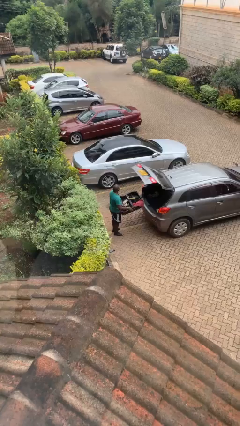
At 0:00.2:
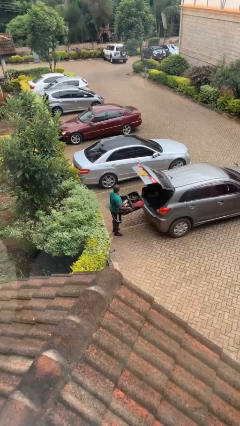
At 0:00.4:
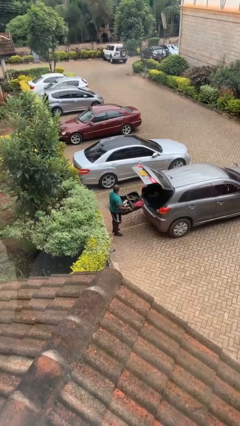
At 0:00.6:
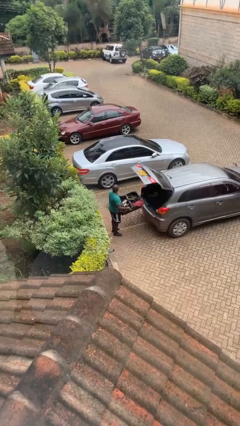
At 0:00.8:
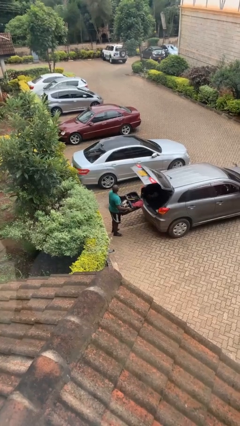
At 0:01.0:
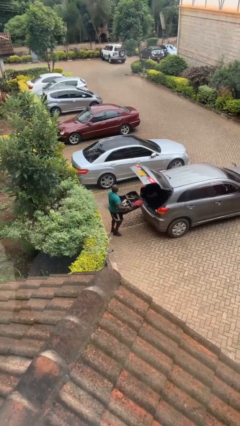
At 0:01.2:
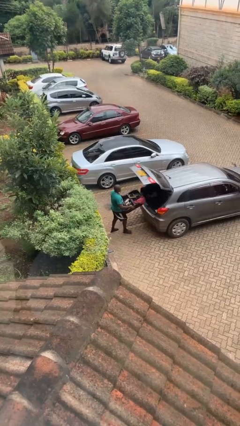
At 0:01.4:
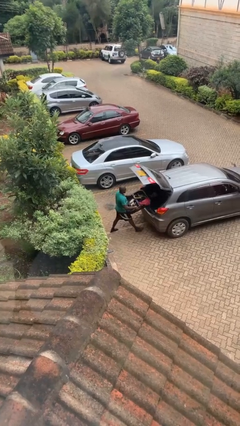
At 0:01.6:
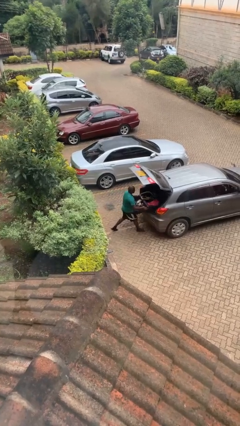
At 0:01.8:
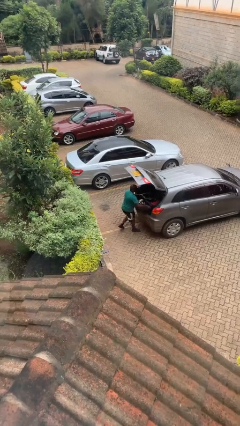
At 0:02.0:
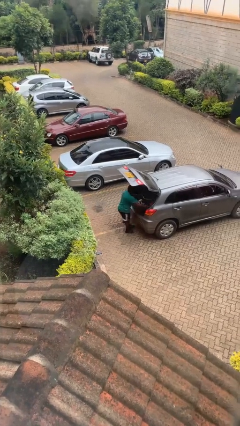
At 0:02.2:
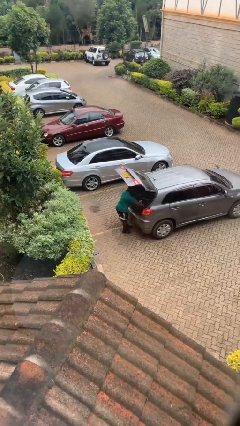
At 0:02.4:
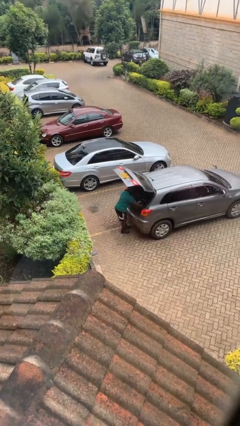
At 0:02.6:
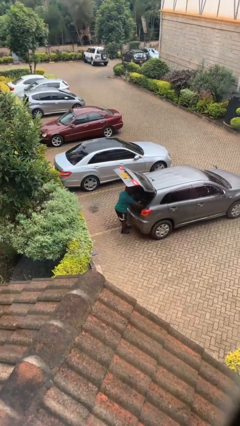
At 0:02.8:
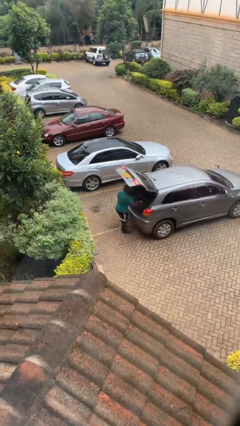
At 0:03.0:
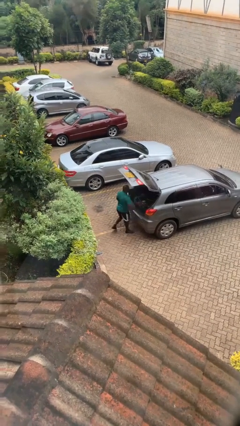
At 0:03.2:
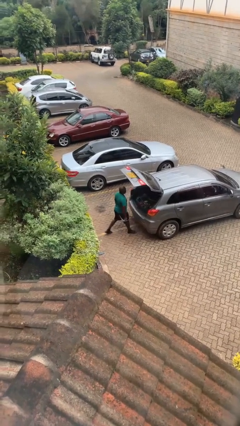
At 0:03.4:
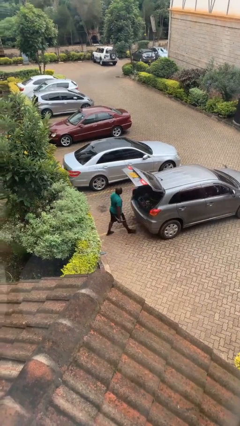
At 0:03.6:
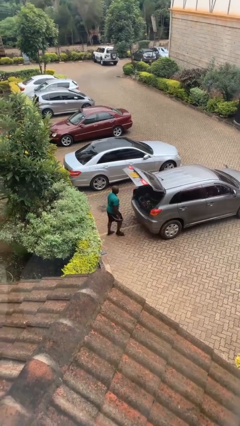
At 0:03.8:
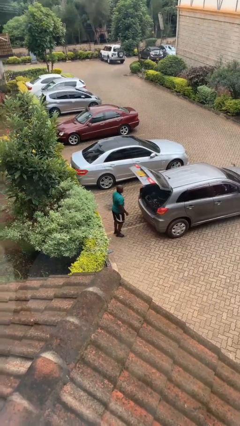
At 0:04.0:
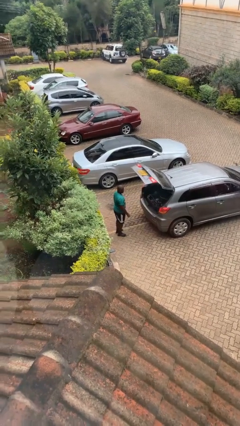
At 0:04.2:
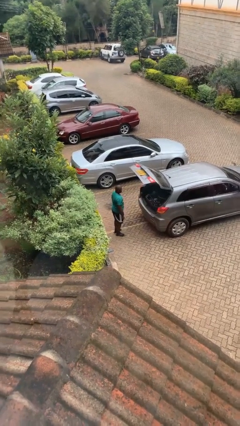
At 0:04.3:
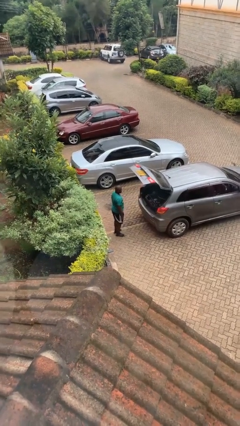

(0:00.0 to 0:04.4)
person loads car

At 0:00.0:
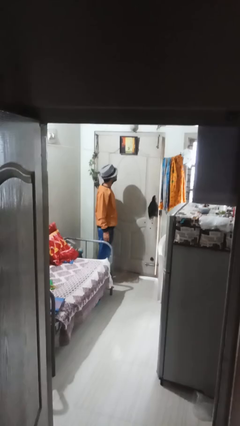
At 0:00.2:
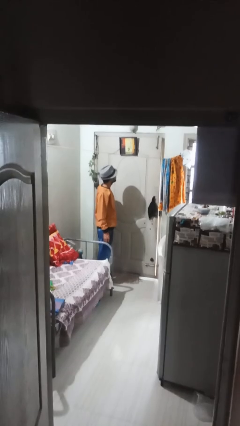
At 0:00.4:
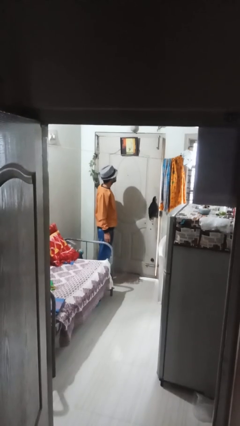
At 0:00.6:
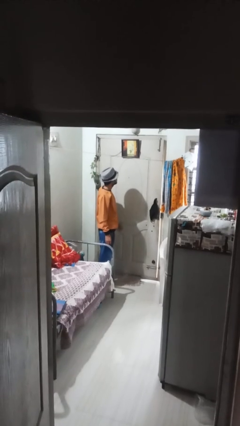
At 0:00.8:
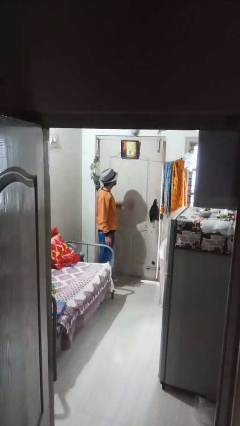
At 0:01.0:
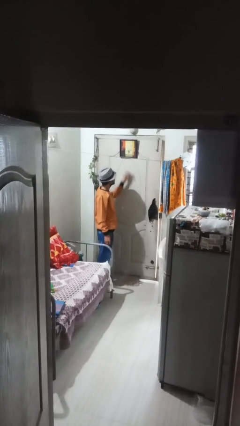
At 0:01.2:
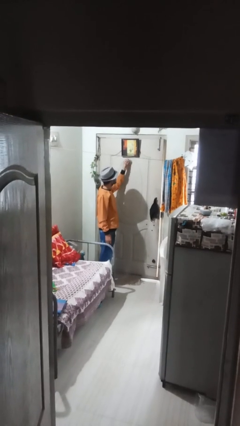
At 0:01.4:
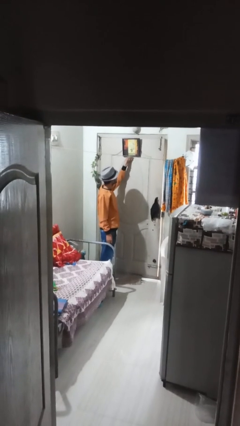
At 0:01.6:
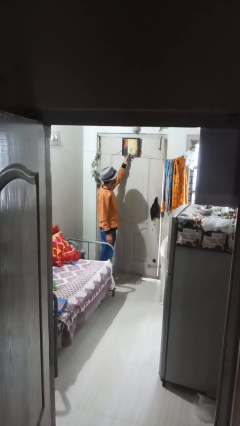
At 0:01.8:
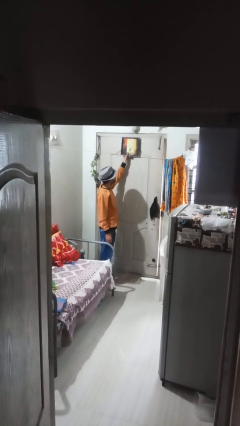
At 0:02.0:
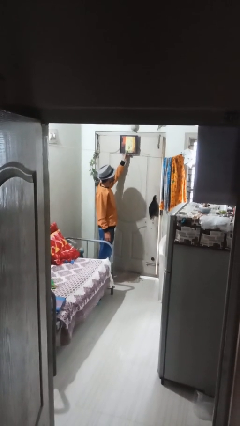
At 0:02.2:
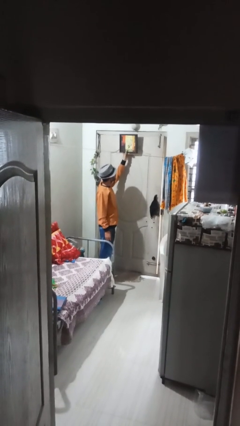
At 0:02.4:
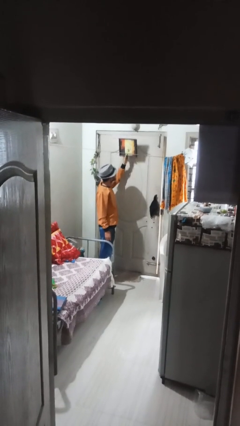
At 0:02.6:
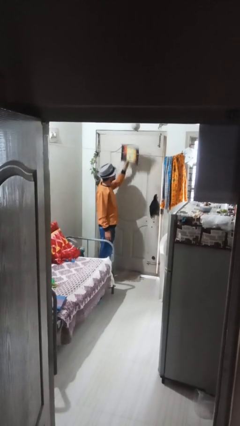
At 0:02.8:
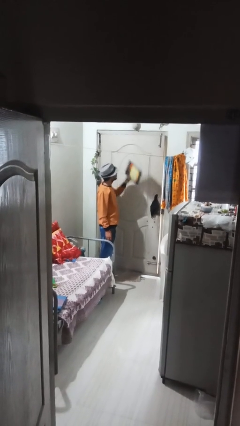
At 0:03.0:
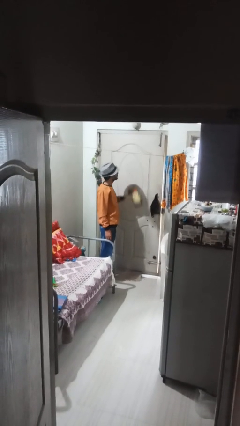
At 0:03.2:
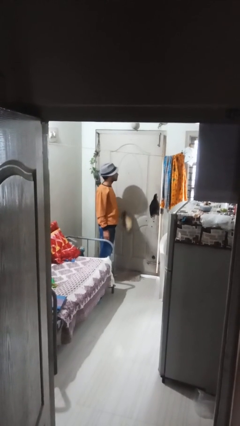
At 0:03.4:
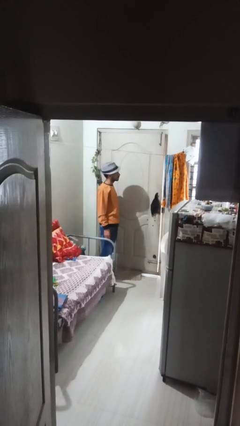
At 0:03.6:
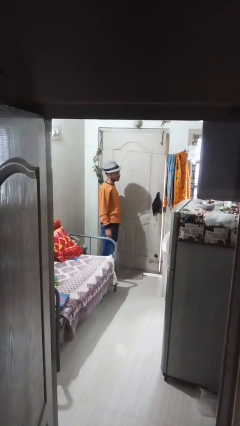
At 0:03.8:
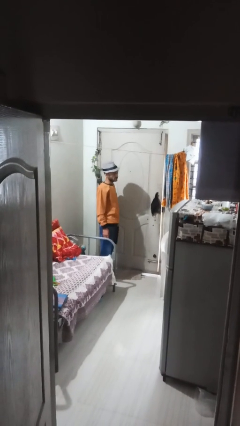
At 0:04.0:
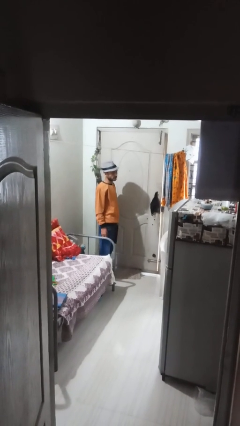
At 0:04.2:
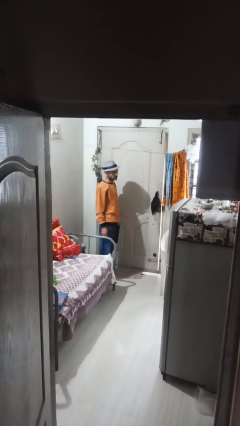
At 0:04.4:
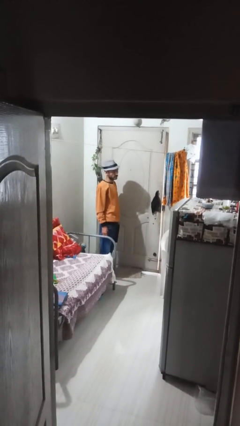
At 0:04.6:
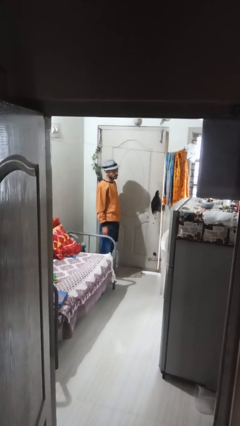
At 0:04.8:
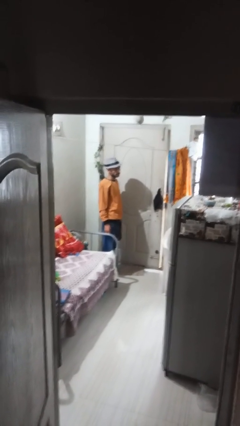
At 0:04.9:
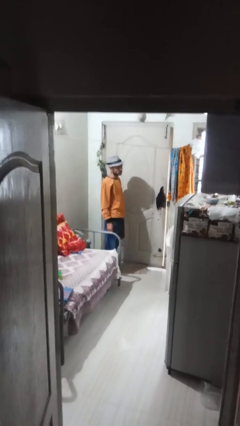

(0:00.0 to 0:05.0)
person takes down picture frame

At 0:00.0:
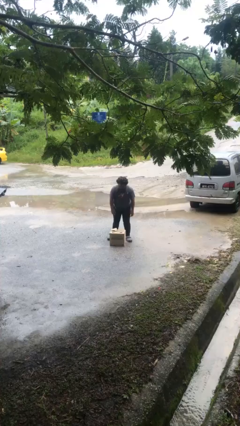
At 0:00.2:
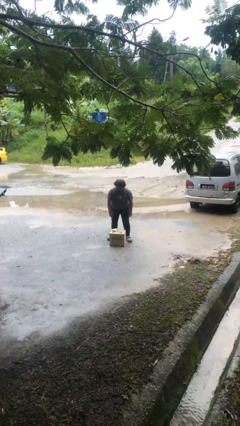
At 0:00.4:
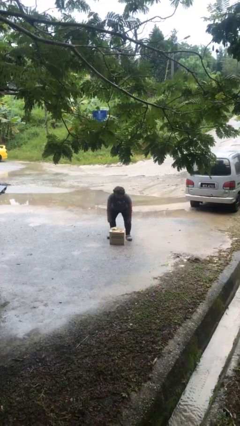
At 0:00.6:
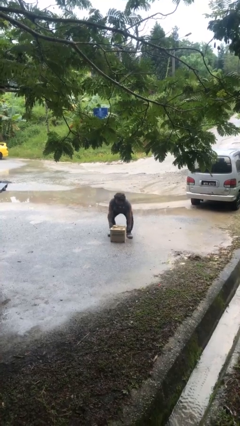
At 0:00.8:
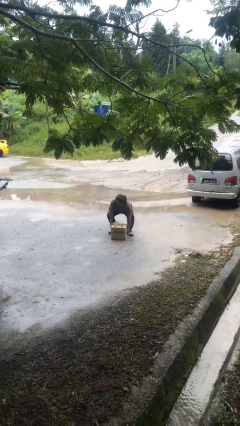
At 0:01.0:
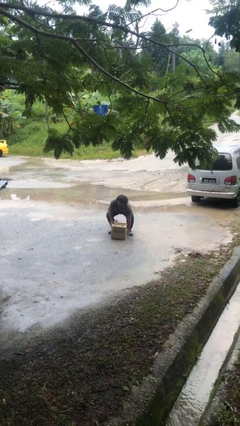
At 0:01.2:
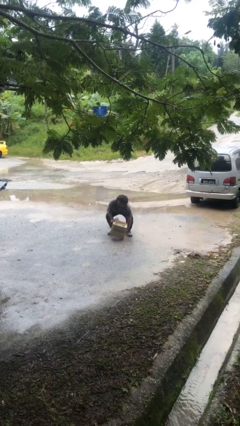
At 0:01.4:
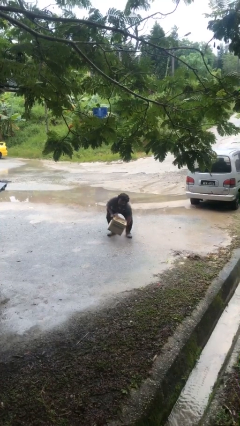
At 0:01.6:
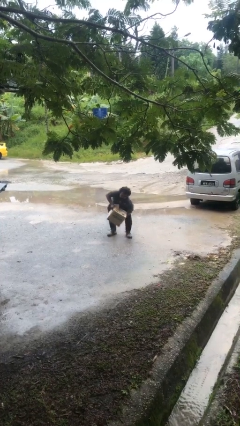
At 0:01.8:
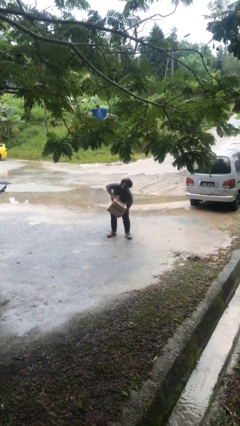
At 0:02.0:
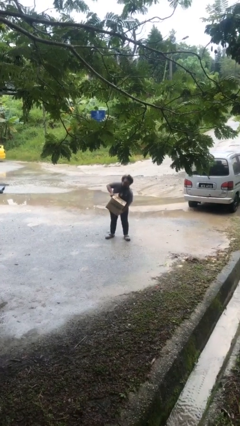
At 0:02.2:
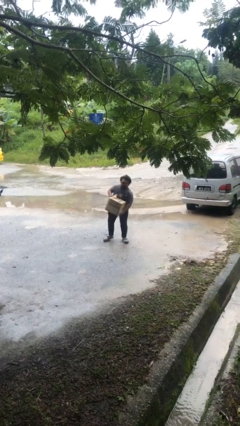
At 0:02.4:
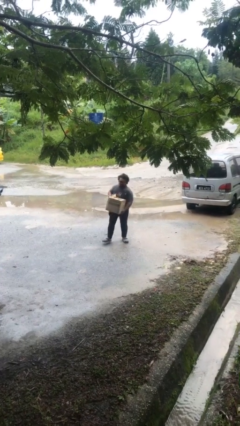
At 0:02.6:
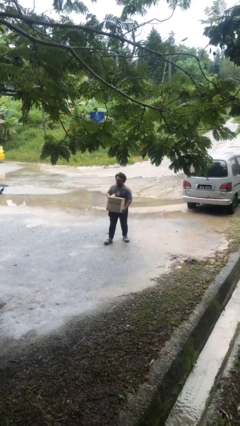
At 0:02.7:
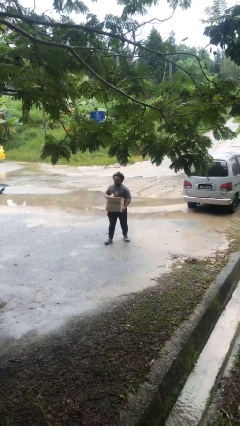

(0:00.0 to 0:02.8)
person picks up object from floor

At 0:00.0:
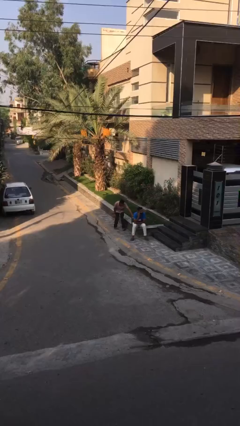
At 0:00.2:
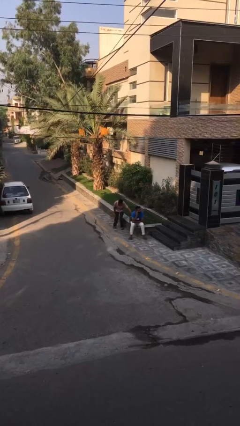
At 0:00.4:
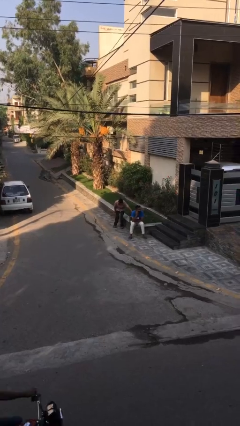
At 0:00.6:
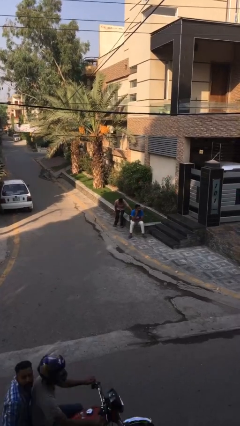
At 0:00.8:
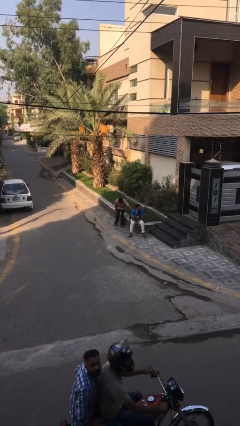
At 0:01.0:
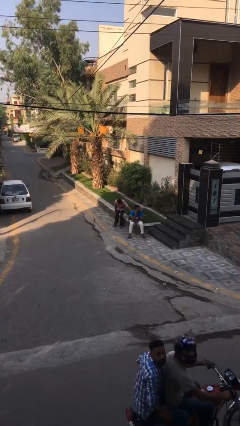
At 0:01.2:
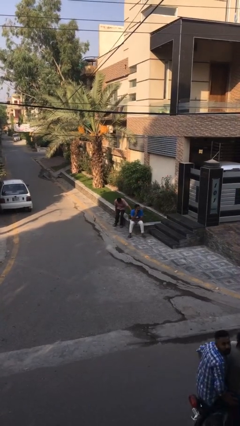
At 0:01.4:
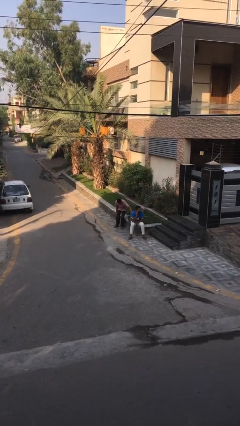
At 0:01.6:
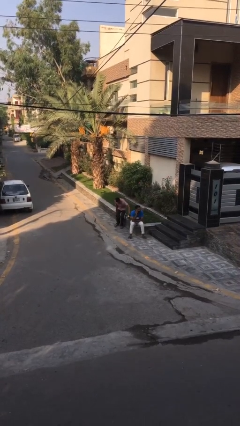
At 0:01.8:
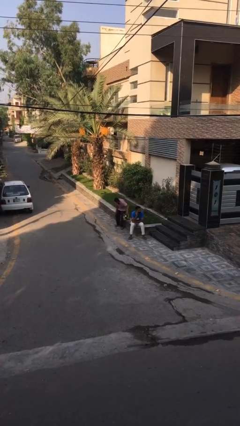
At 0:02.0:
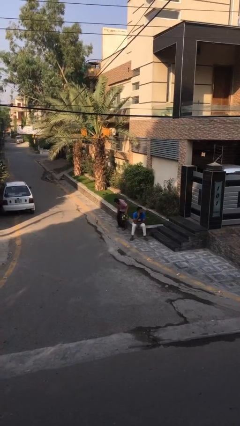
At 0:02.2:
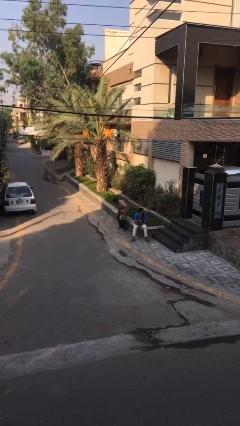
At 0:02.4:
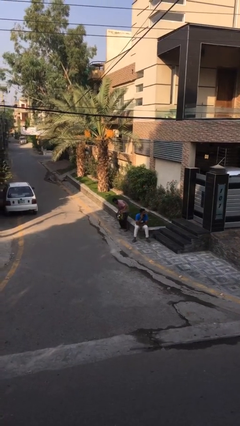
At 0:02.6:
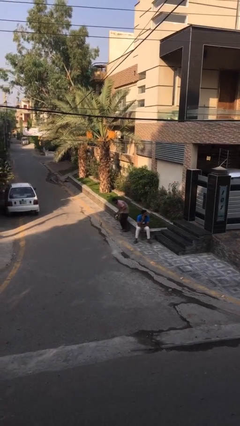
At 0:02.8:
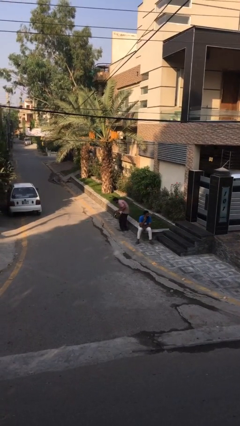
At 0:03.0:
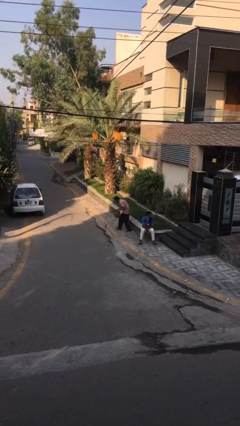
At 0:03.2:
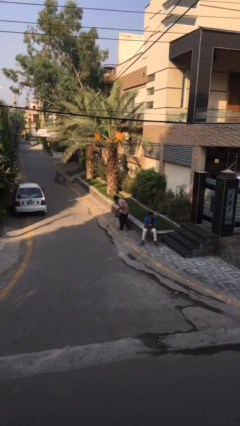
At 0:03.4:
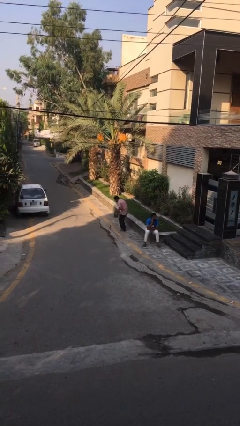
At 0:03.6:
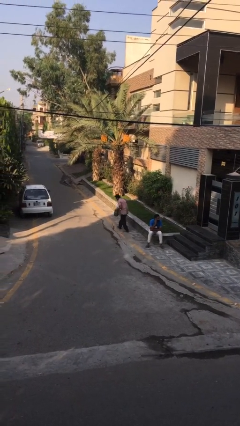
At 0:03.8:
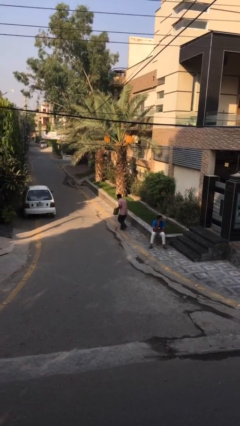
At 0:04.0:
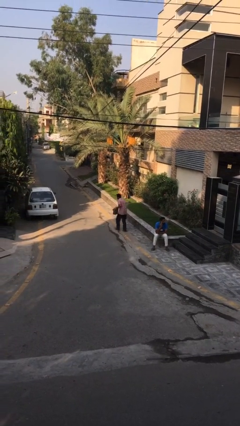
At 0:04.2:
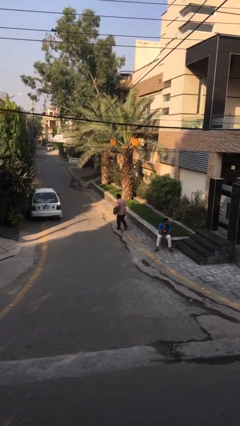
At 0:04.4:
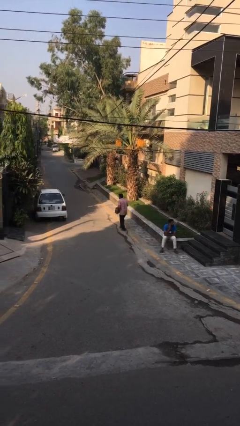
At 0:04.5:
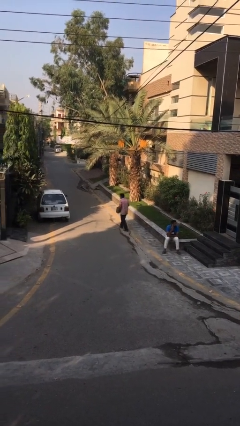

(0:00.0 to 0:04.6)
person steals object from person

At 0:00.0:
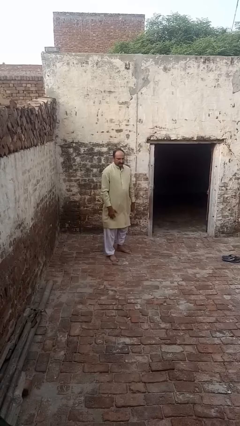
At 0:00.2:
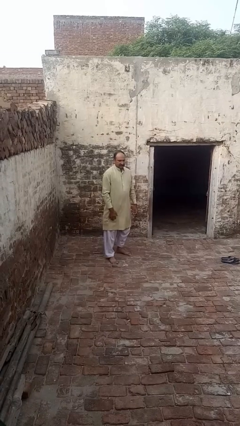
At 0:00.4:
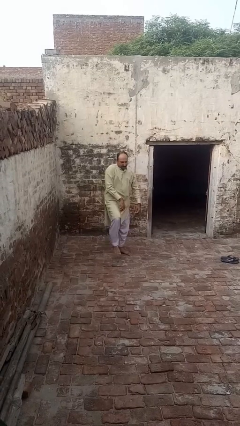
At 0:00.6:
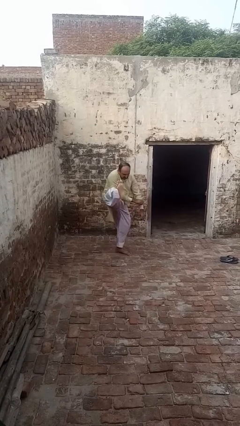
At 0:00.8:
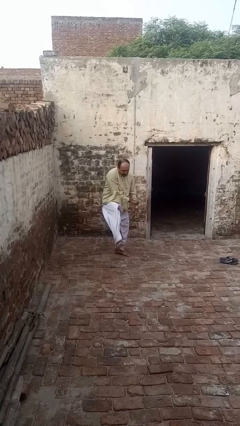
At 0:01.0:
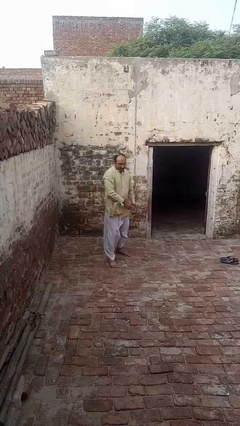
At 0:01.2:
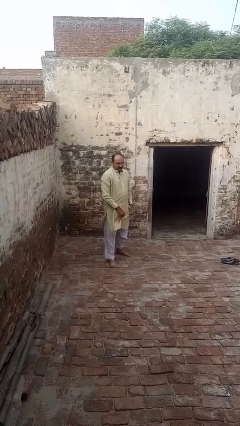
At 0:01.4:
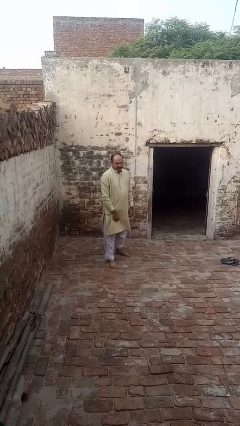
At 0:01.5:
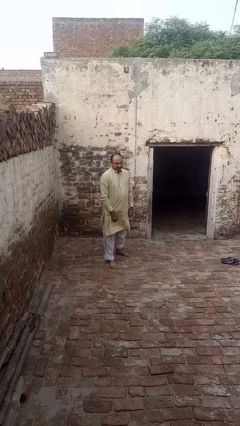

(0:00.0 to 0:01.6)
person karate kicks
